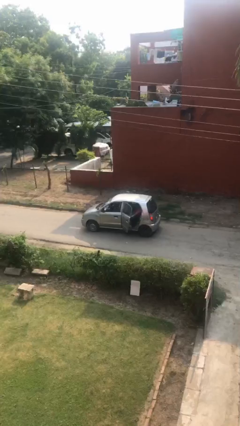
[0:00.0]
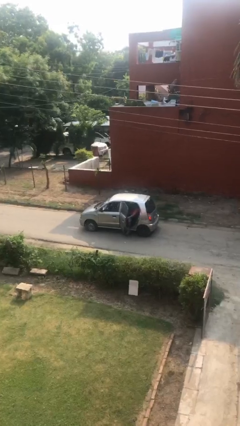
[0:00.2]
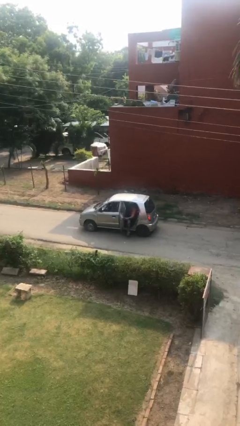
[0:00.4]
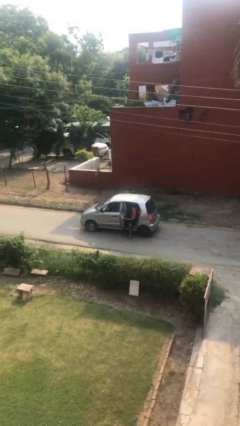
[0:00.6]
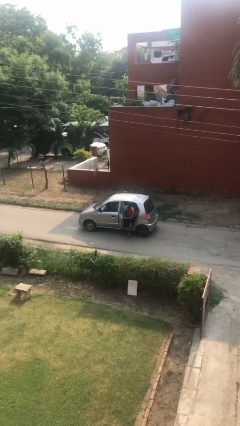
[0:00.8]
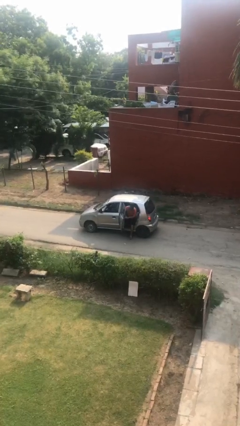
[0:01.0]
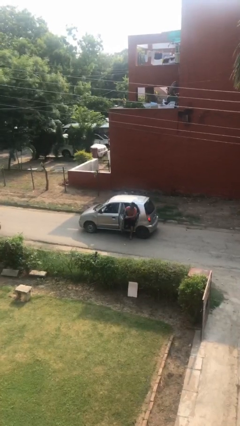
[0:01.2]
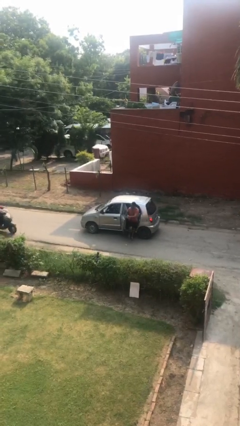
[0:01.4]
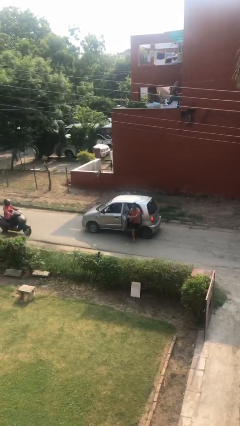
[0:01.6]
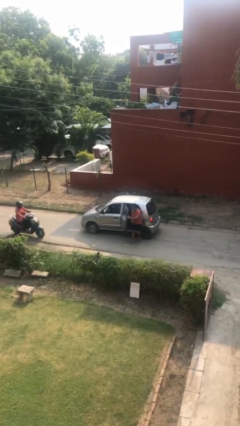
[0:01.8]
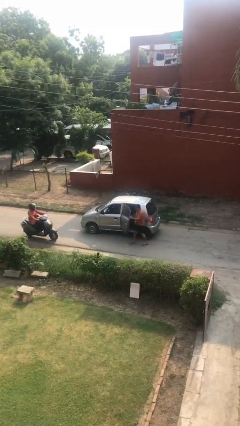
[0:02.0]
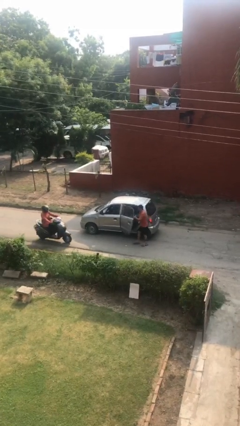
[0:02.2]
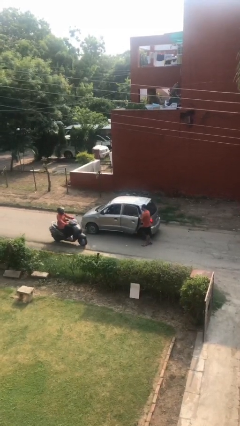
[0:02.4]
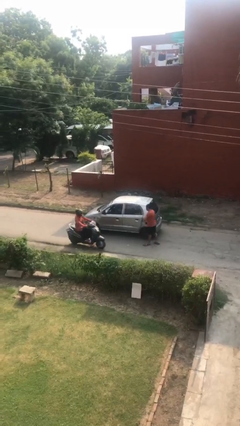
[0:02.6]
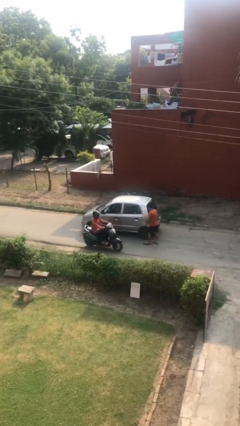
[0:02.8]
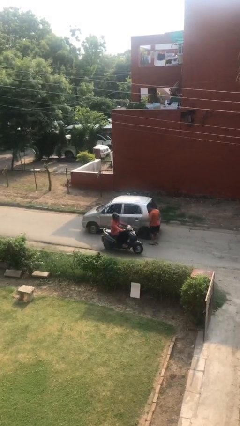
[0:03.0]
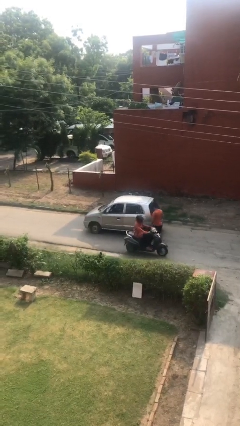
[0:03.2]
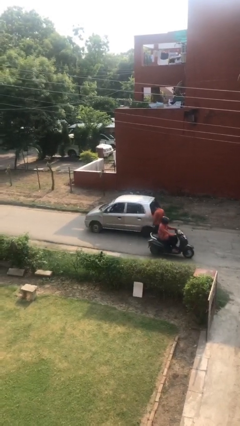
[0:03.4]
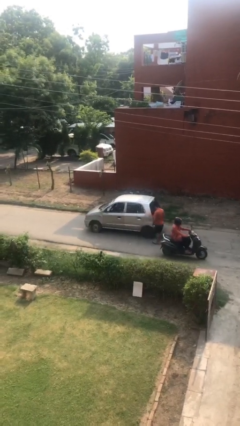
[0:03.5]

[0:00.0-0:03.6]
car drops off person

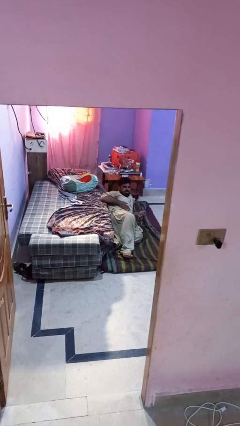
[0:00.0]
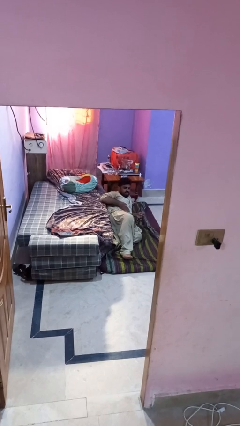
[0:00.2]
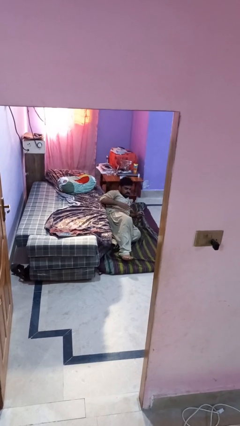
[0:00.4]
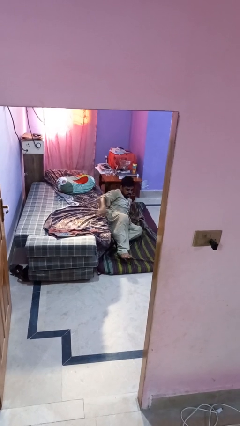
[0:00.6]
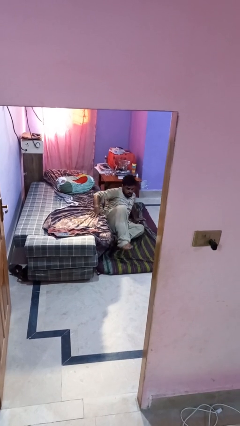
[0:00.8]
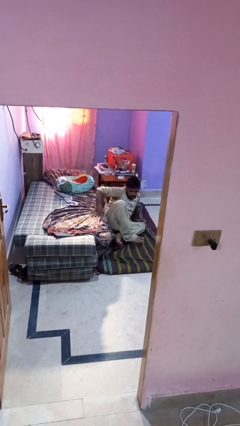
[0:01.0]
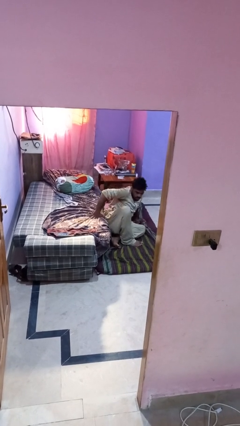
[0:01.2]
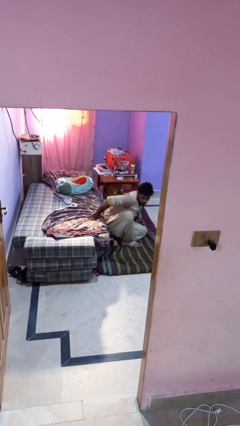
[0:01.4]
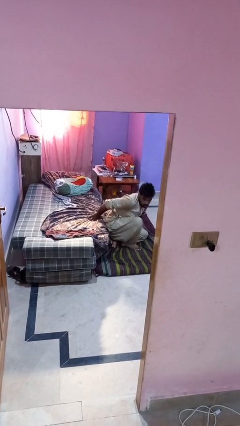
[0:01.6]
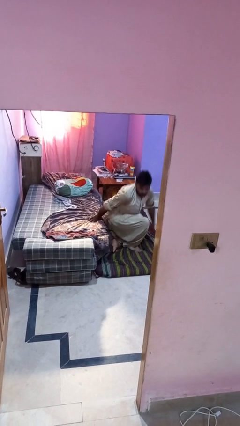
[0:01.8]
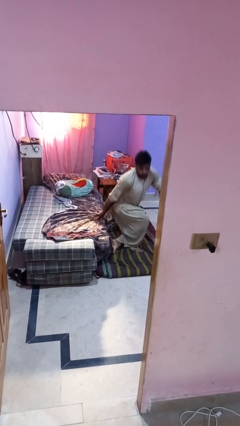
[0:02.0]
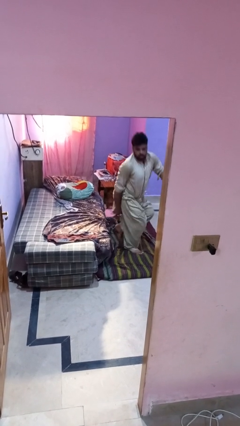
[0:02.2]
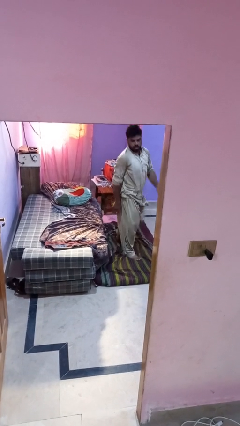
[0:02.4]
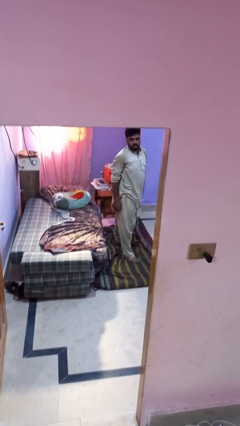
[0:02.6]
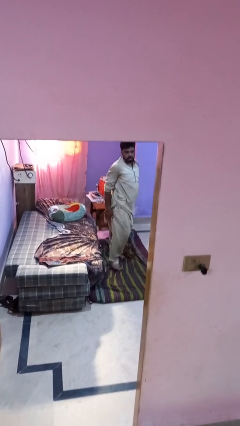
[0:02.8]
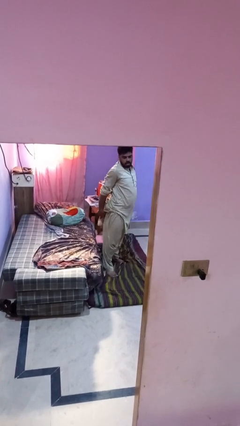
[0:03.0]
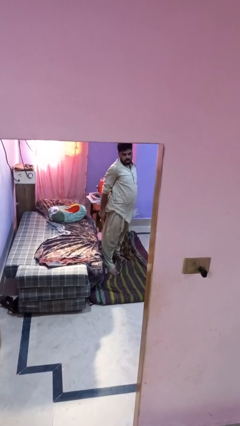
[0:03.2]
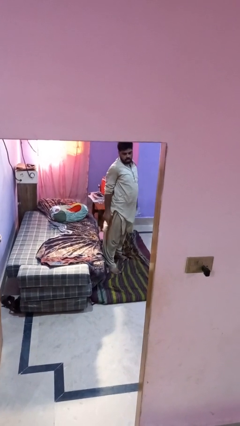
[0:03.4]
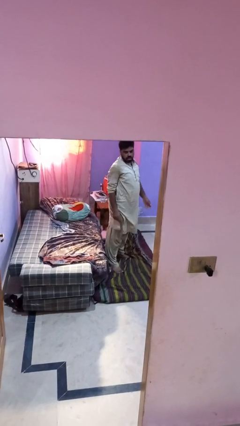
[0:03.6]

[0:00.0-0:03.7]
person stands up from floor

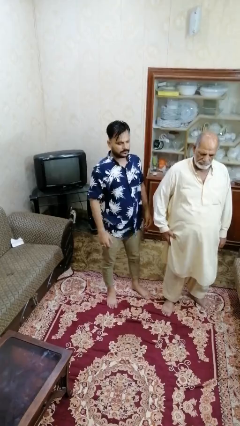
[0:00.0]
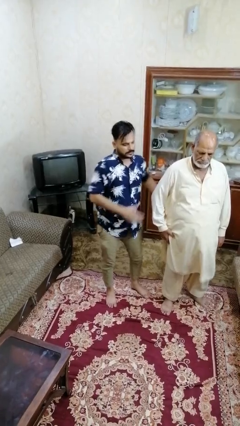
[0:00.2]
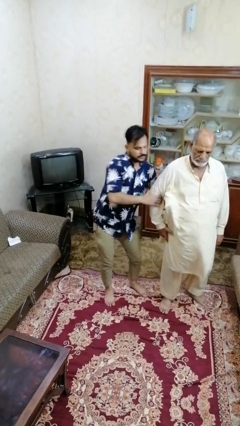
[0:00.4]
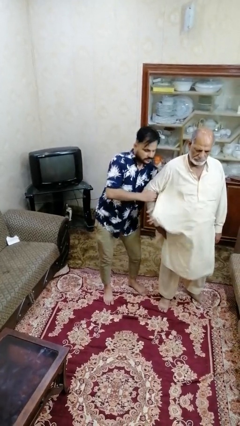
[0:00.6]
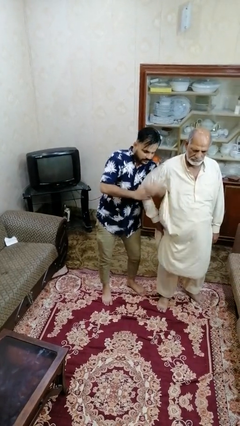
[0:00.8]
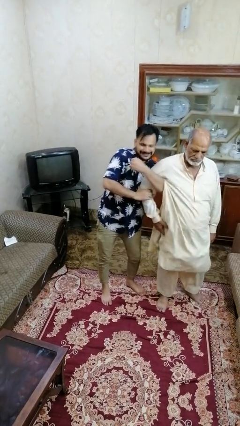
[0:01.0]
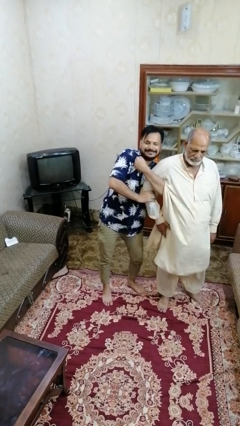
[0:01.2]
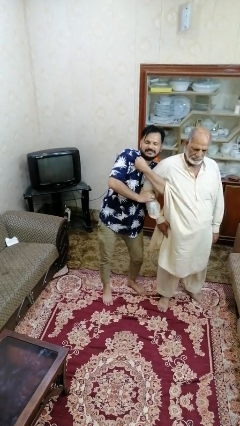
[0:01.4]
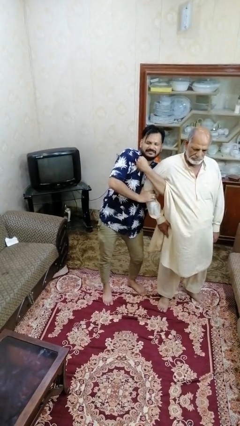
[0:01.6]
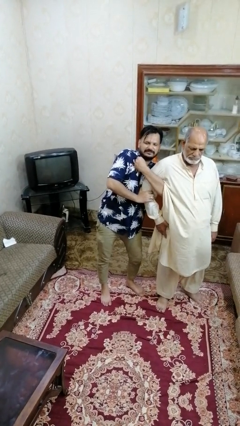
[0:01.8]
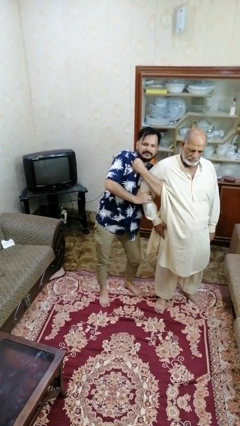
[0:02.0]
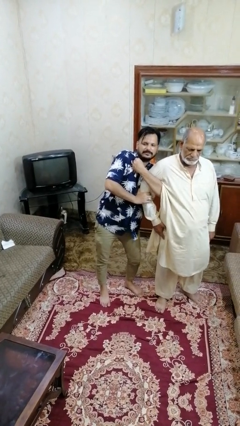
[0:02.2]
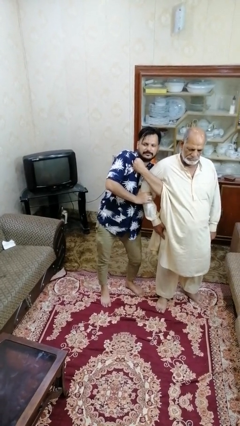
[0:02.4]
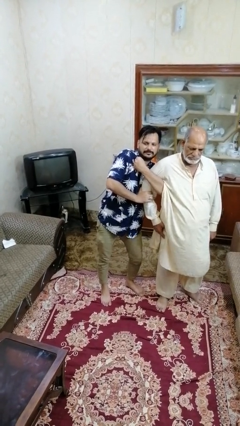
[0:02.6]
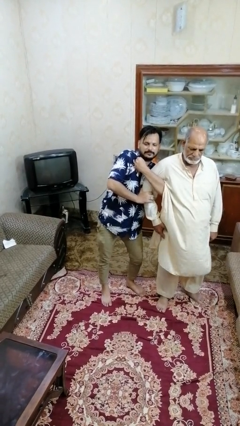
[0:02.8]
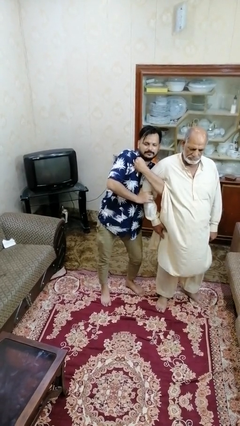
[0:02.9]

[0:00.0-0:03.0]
person grabs person by bicep

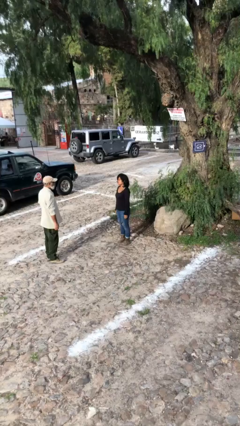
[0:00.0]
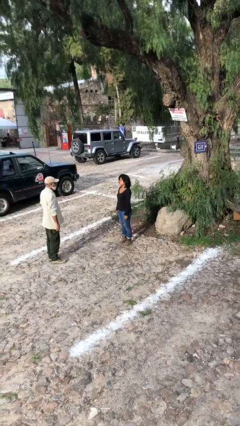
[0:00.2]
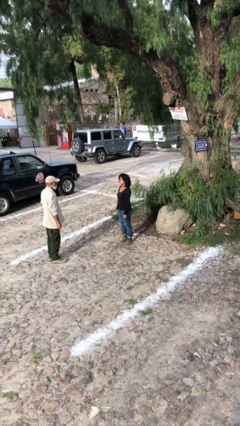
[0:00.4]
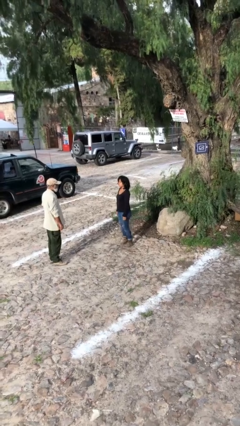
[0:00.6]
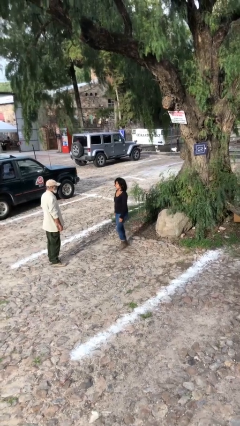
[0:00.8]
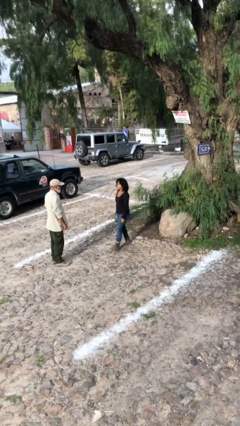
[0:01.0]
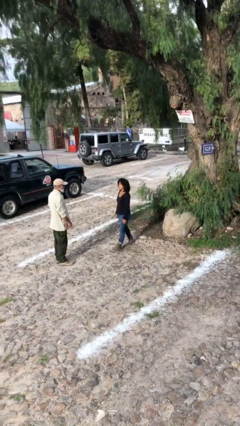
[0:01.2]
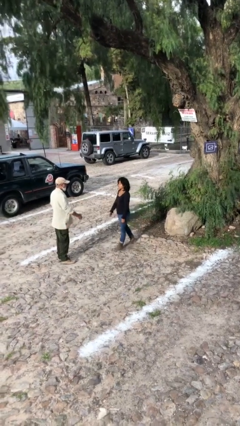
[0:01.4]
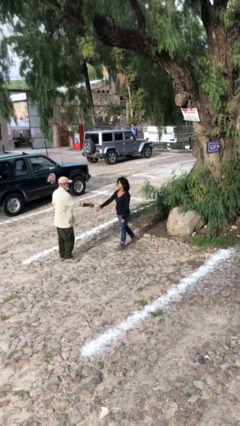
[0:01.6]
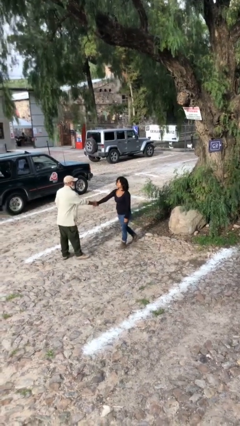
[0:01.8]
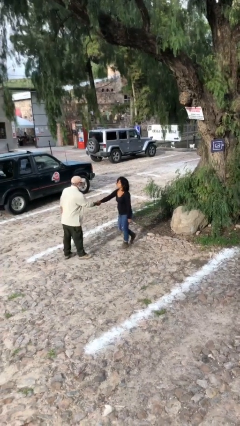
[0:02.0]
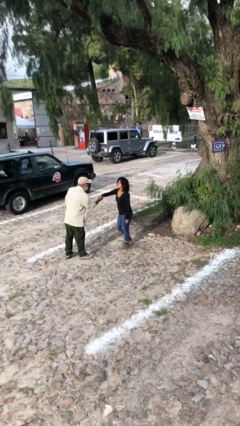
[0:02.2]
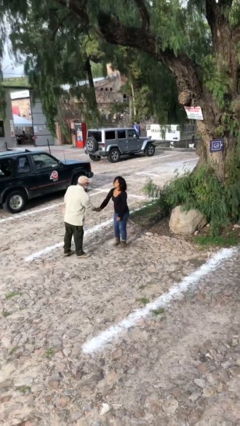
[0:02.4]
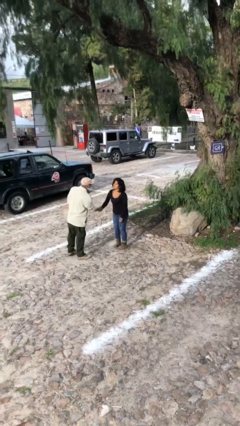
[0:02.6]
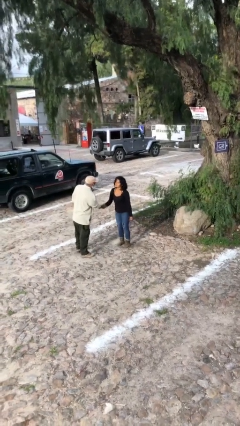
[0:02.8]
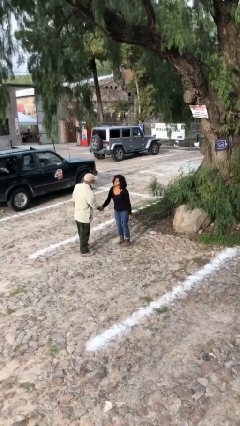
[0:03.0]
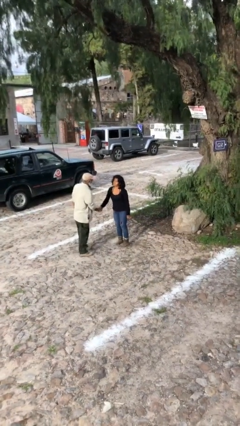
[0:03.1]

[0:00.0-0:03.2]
person shakes hand

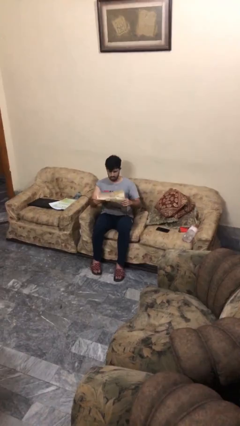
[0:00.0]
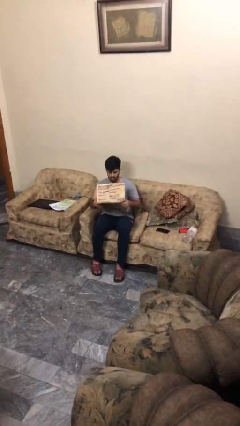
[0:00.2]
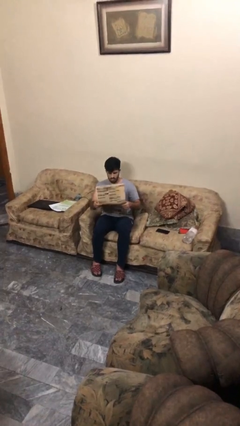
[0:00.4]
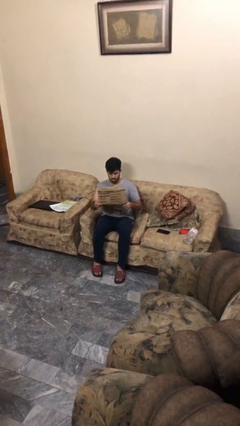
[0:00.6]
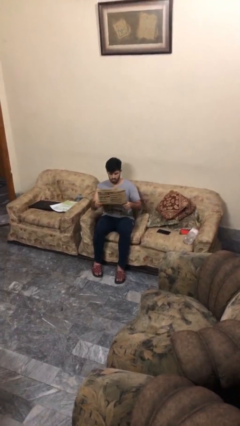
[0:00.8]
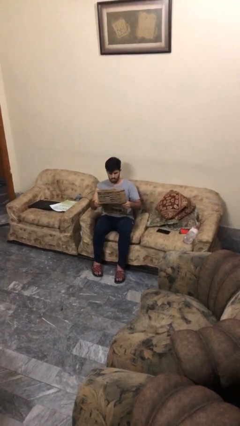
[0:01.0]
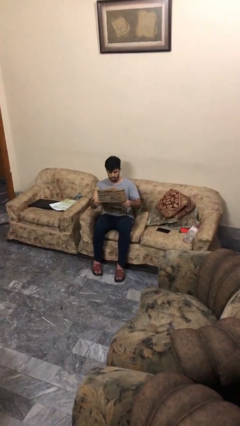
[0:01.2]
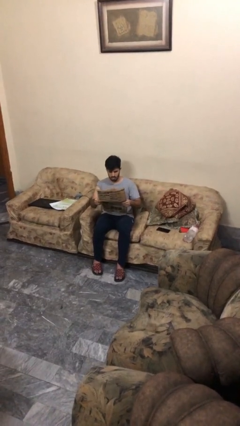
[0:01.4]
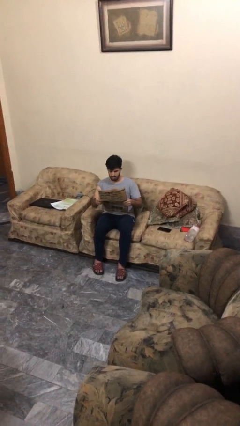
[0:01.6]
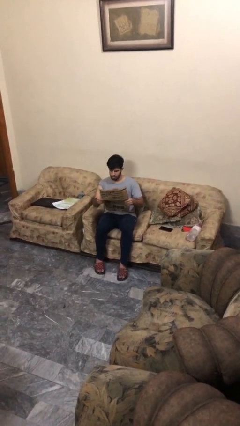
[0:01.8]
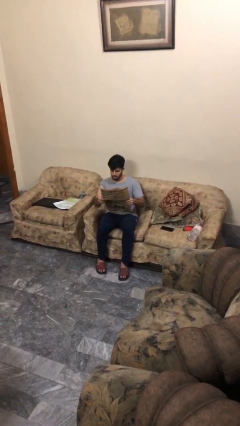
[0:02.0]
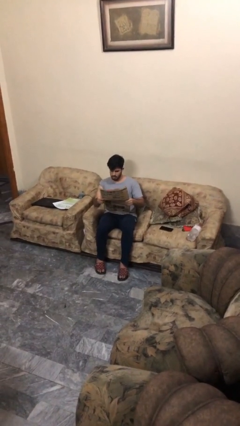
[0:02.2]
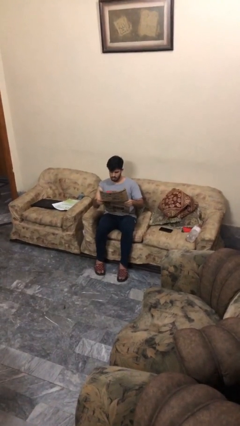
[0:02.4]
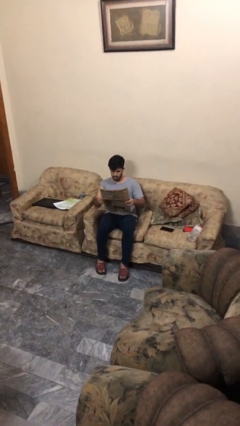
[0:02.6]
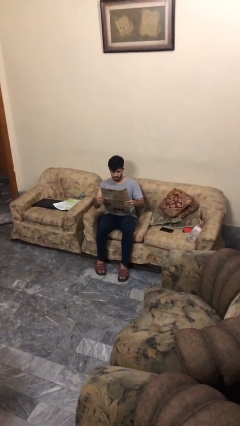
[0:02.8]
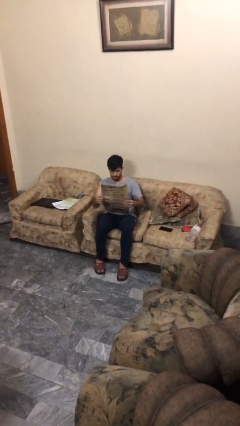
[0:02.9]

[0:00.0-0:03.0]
person reads newspaper

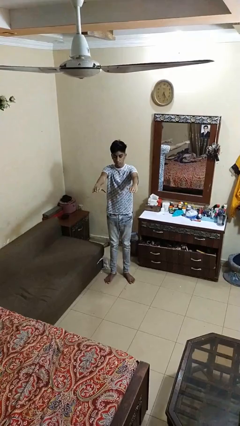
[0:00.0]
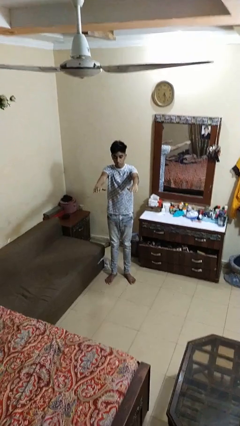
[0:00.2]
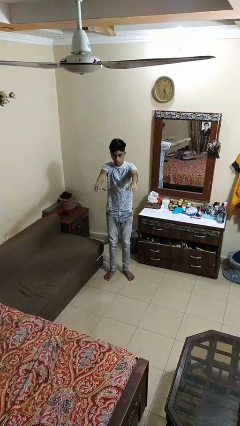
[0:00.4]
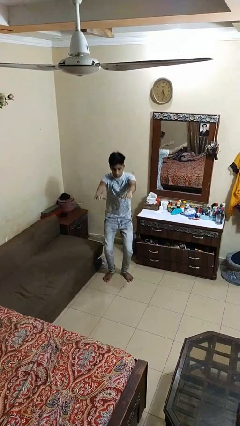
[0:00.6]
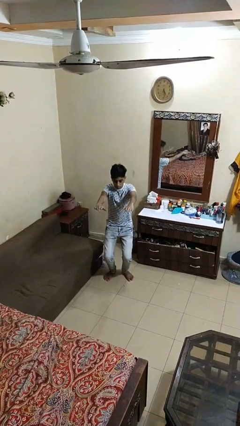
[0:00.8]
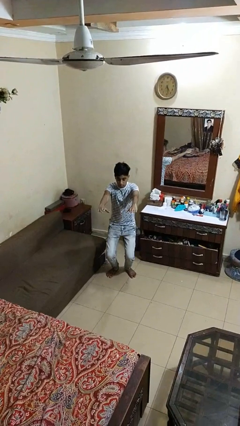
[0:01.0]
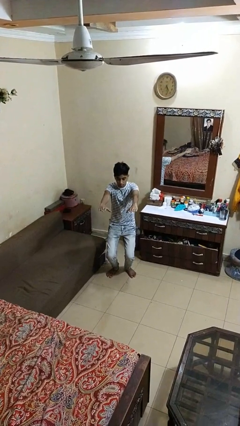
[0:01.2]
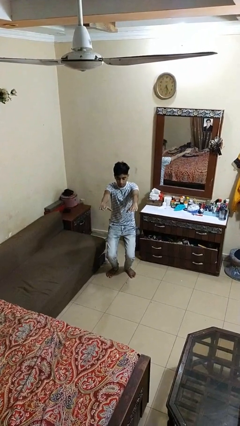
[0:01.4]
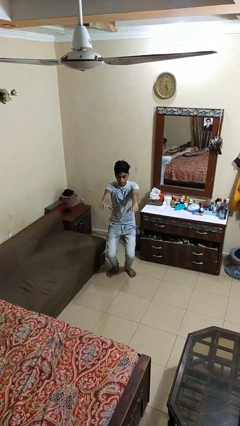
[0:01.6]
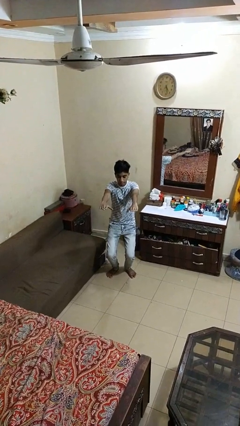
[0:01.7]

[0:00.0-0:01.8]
person squats
